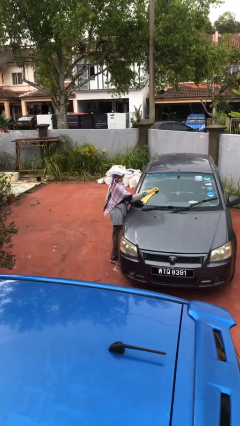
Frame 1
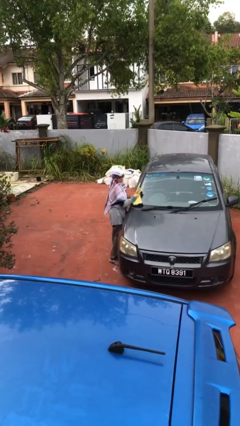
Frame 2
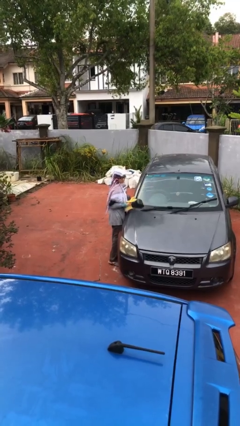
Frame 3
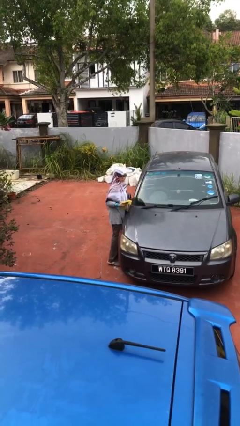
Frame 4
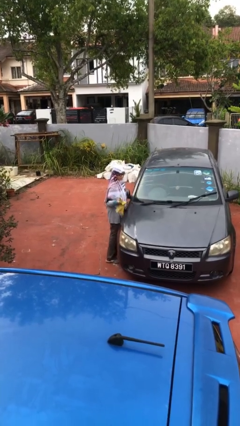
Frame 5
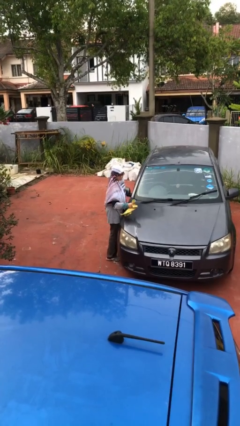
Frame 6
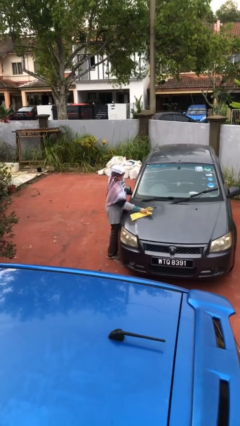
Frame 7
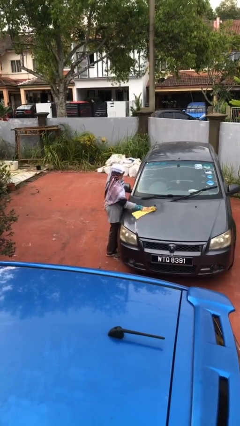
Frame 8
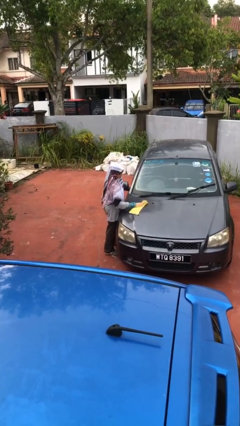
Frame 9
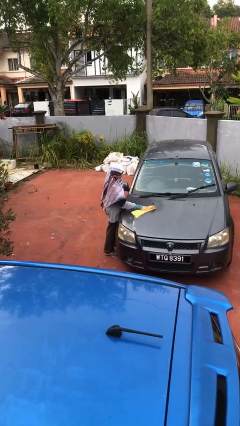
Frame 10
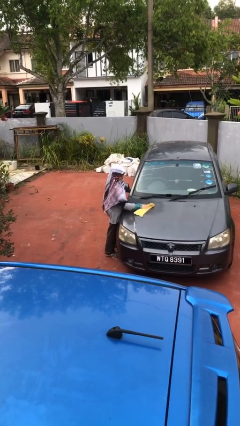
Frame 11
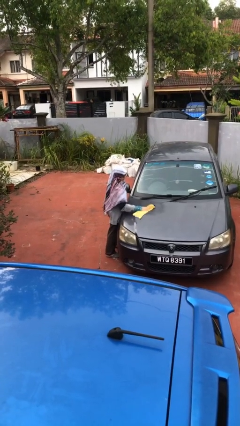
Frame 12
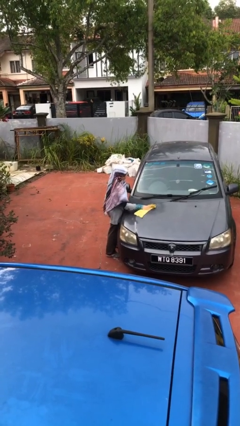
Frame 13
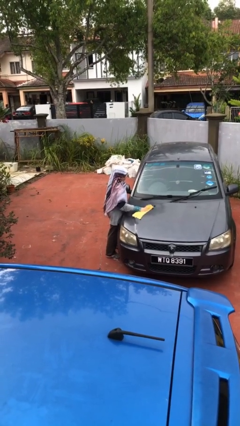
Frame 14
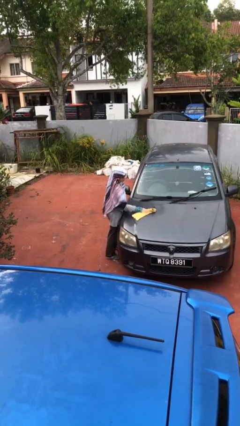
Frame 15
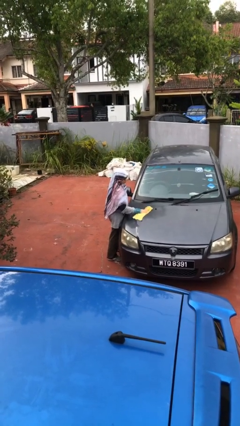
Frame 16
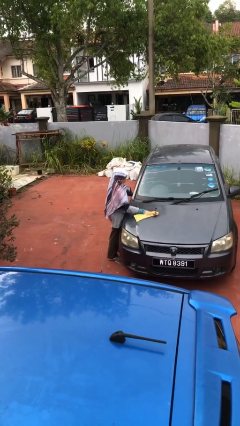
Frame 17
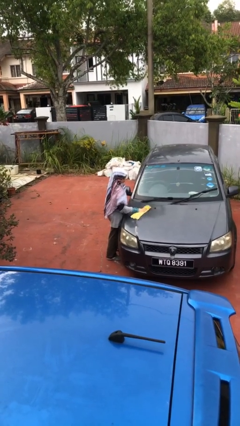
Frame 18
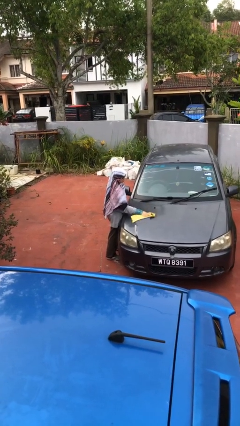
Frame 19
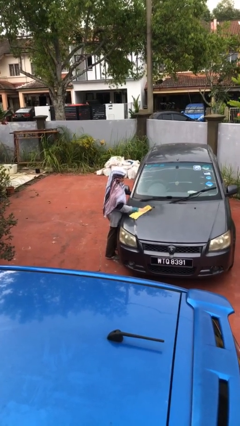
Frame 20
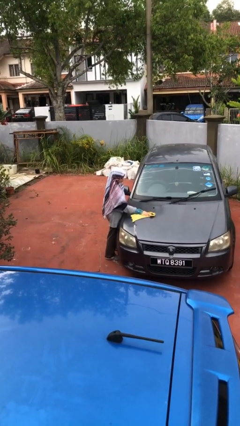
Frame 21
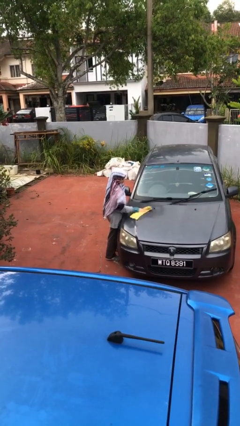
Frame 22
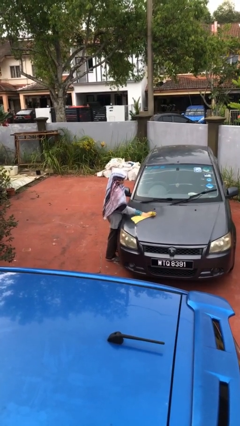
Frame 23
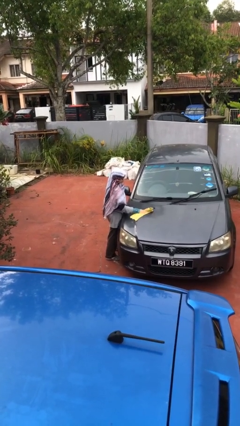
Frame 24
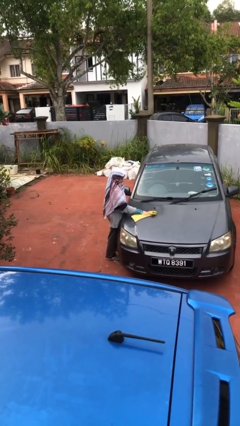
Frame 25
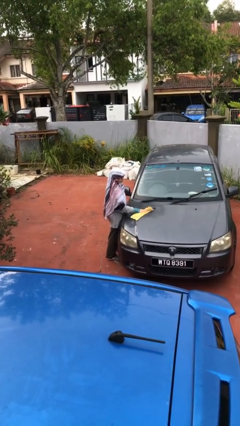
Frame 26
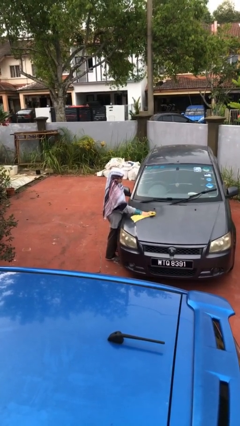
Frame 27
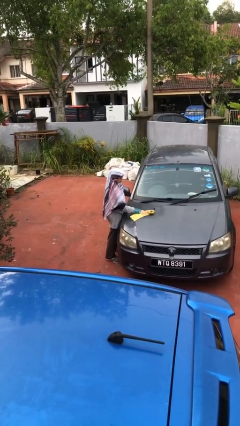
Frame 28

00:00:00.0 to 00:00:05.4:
person polishes car with rag

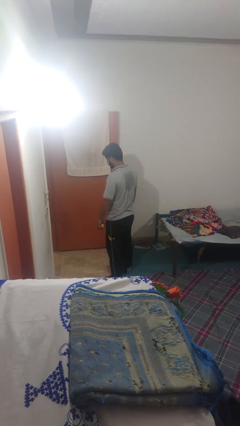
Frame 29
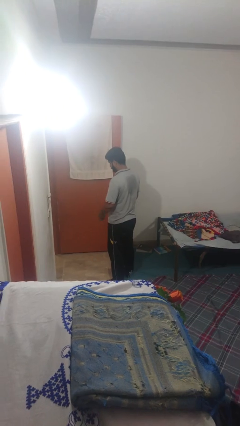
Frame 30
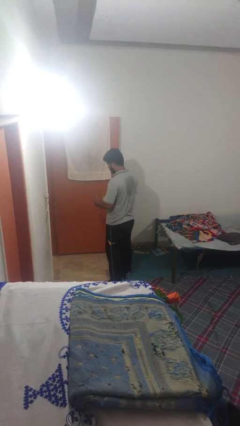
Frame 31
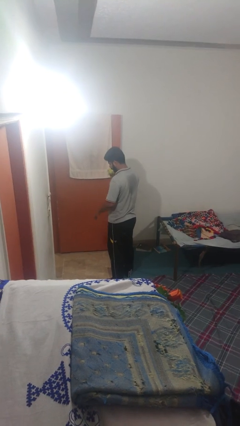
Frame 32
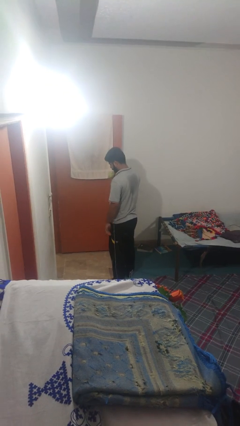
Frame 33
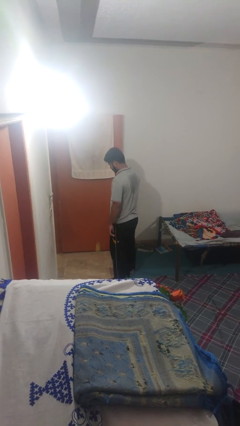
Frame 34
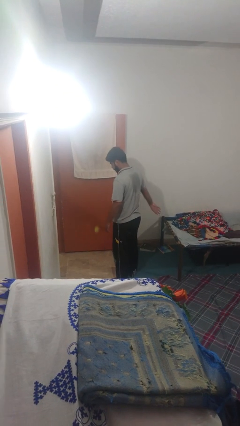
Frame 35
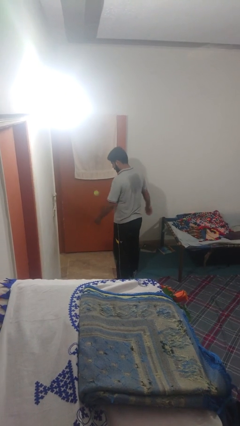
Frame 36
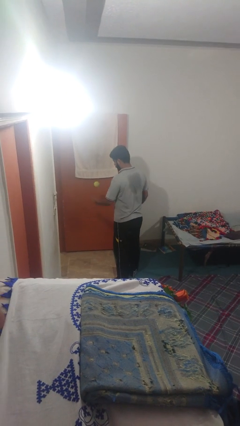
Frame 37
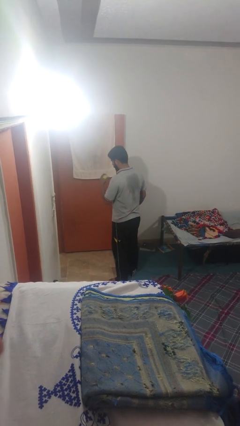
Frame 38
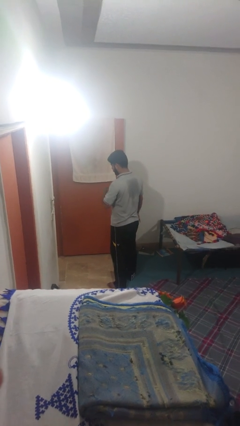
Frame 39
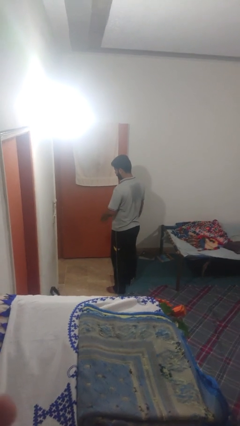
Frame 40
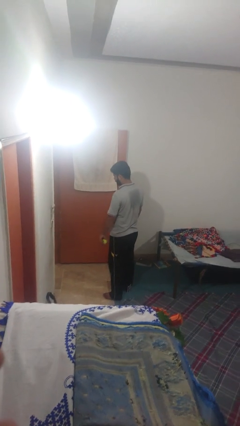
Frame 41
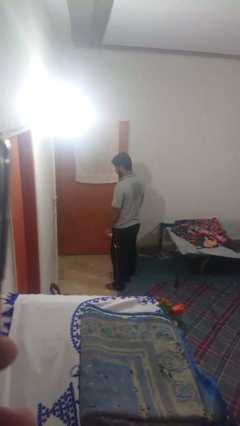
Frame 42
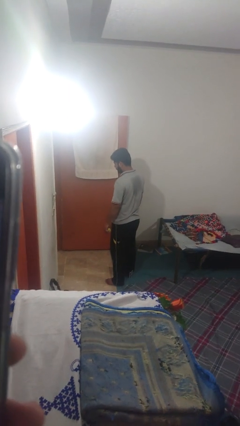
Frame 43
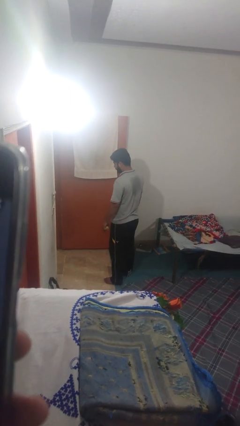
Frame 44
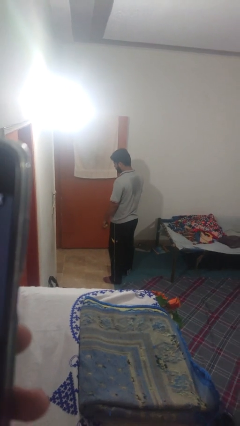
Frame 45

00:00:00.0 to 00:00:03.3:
person bounces ball on floor

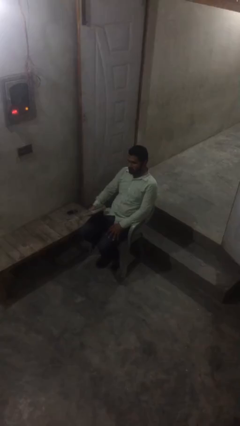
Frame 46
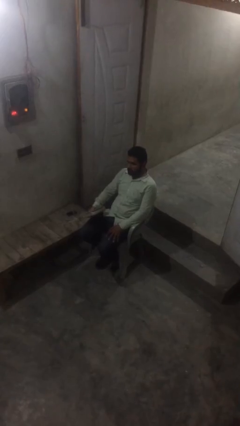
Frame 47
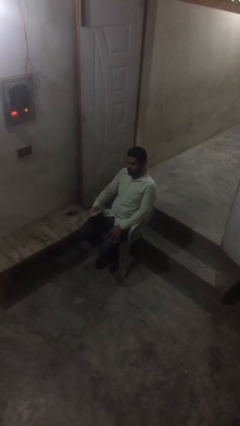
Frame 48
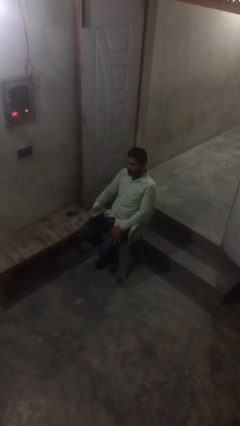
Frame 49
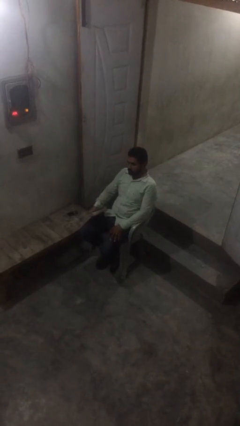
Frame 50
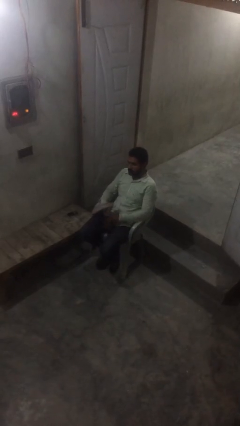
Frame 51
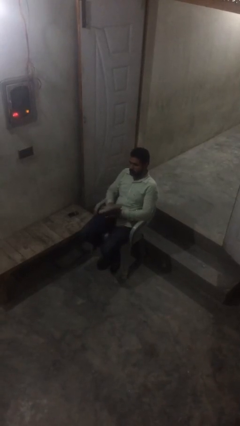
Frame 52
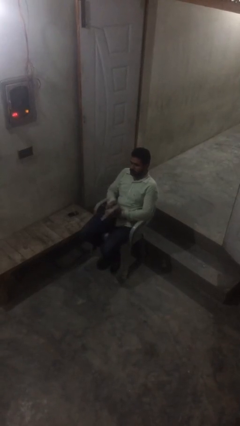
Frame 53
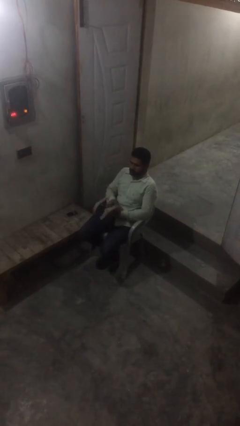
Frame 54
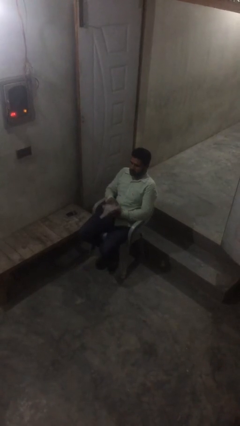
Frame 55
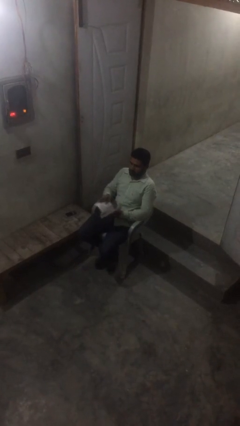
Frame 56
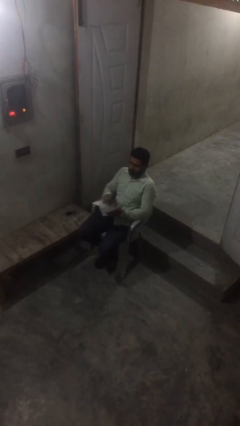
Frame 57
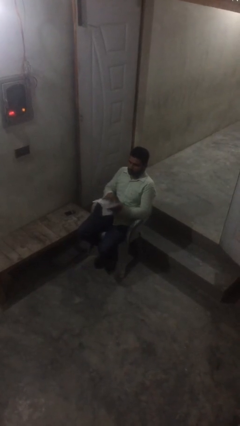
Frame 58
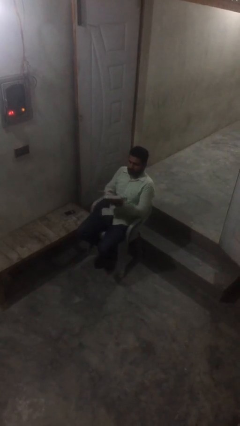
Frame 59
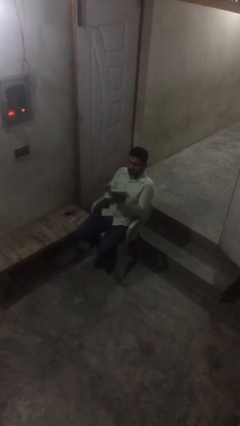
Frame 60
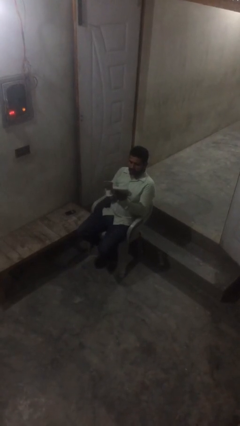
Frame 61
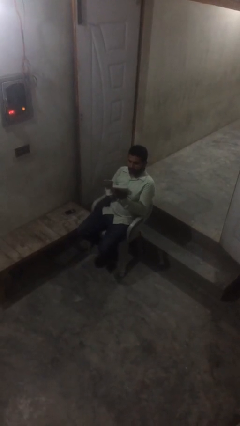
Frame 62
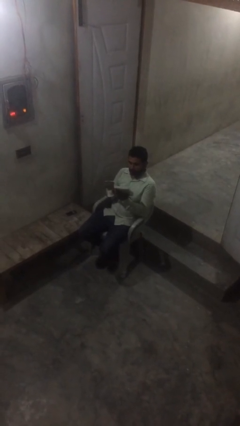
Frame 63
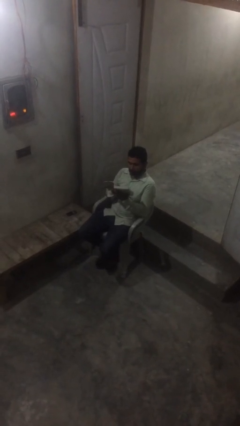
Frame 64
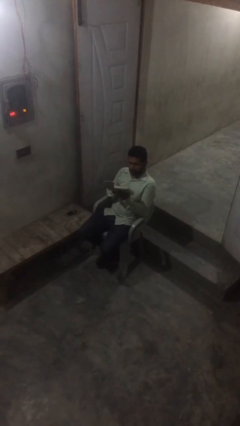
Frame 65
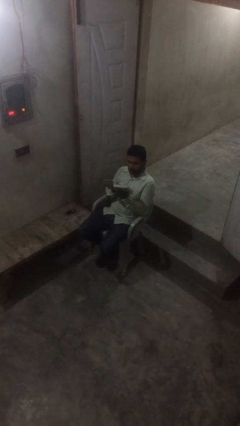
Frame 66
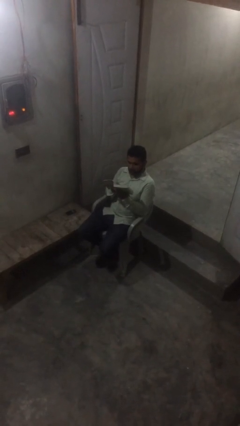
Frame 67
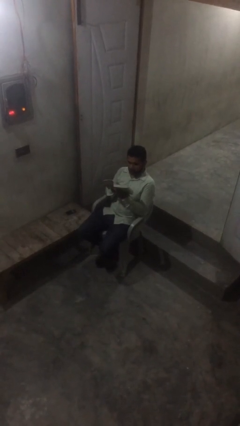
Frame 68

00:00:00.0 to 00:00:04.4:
person reads document

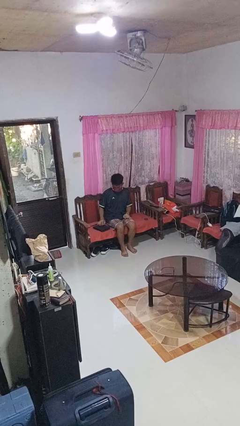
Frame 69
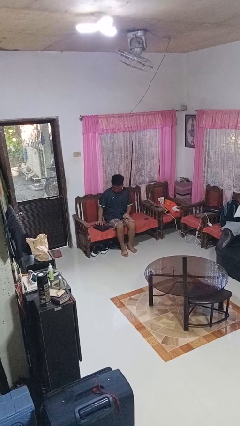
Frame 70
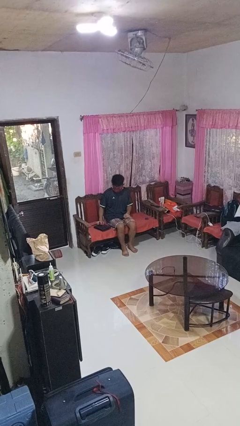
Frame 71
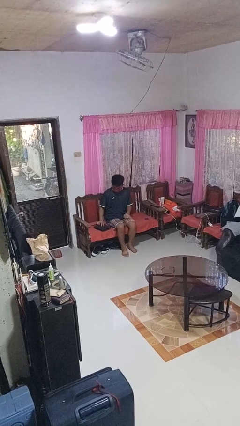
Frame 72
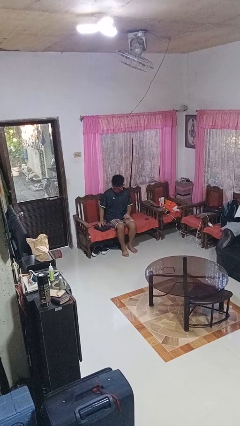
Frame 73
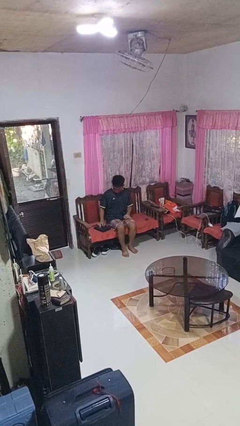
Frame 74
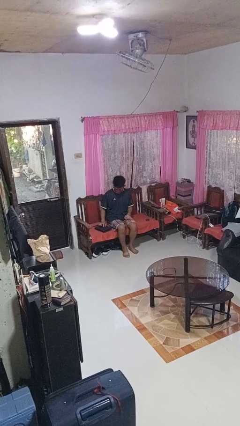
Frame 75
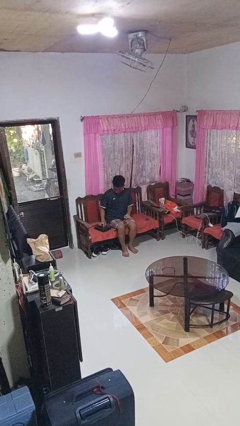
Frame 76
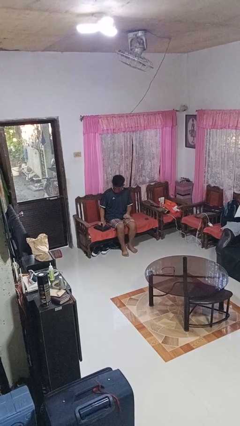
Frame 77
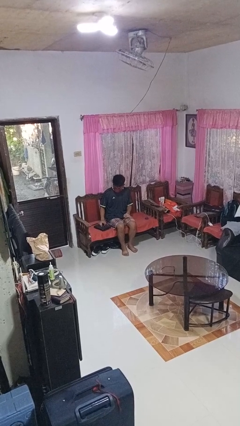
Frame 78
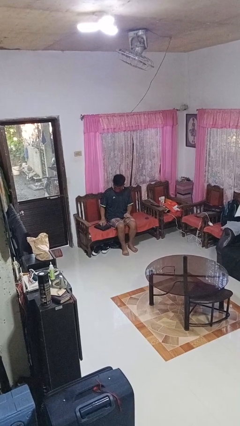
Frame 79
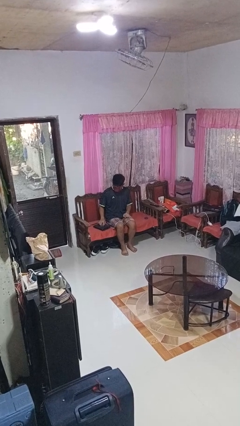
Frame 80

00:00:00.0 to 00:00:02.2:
person taps object with finger

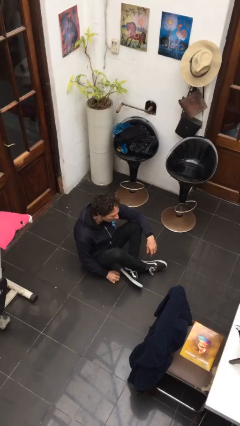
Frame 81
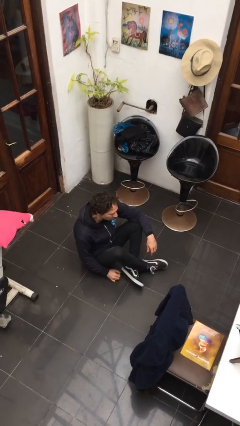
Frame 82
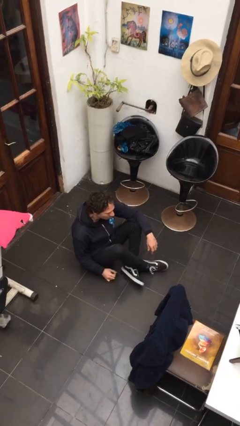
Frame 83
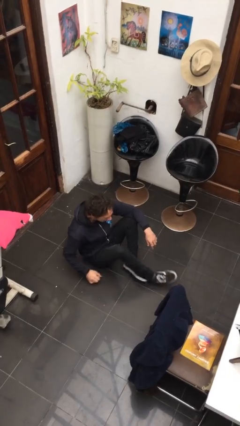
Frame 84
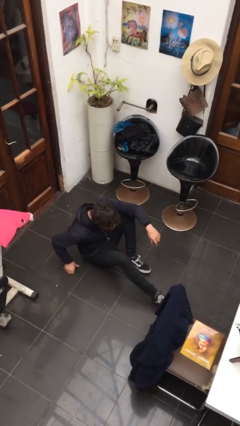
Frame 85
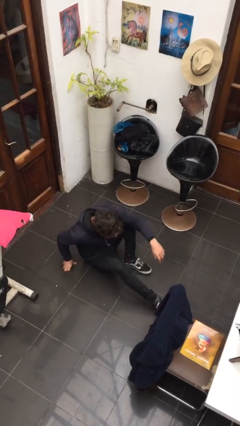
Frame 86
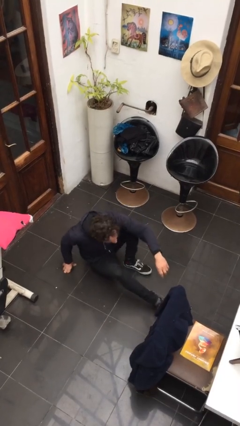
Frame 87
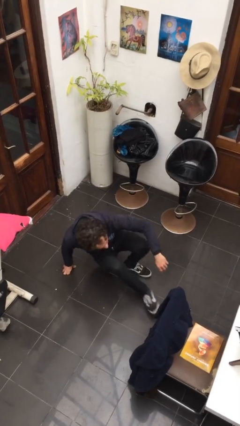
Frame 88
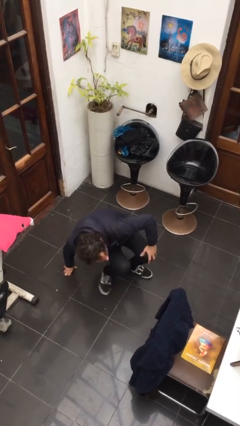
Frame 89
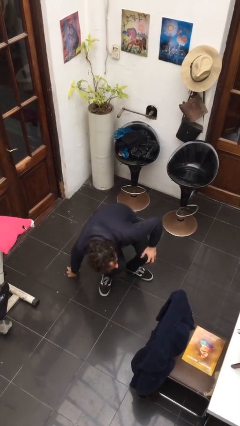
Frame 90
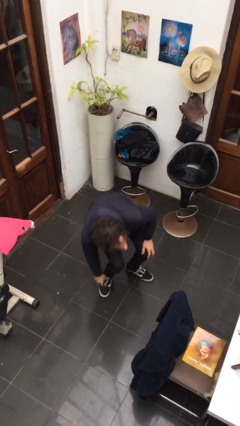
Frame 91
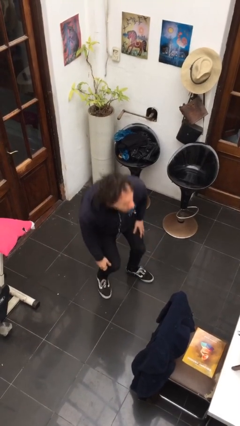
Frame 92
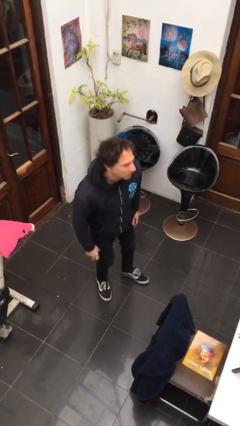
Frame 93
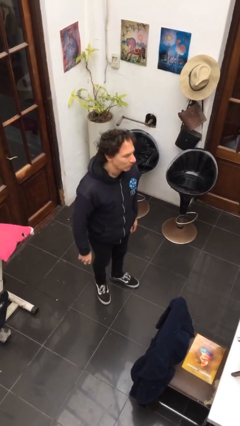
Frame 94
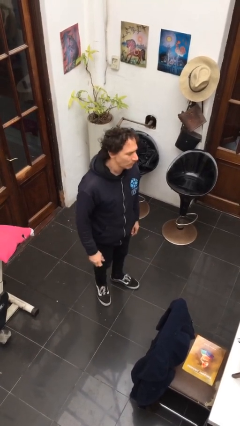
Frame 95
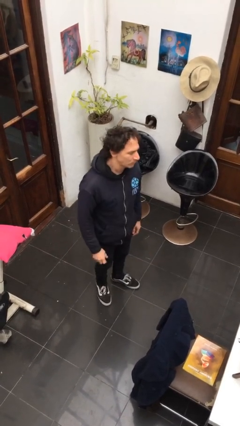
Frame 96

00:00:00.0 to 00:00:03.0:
person stands up from floor
